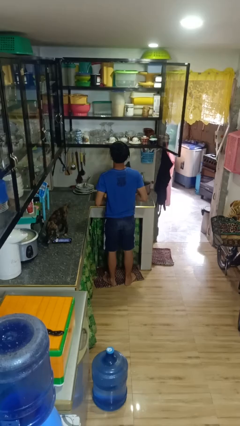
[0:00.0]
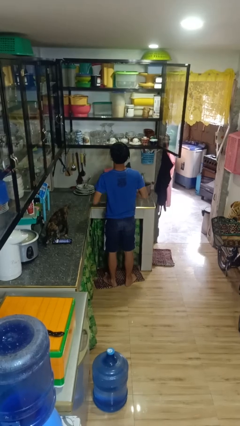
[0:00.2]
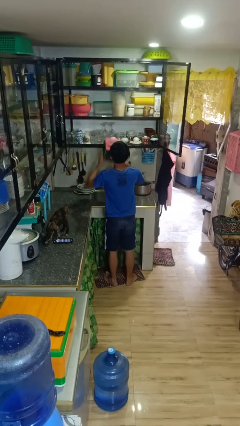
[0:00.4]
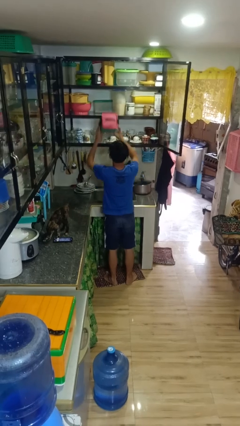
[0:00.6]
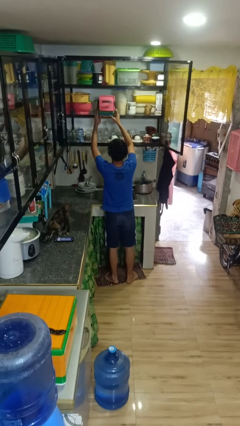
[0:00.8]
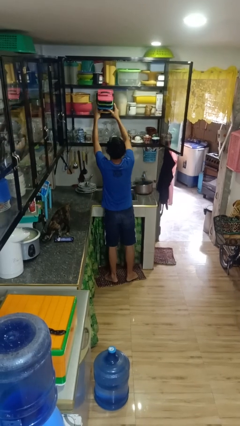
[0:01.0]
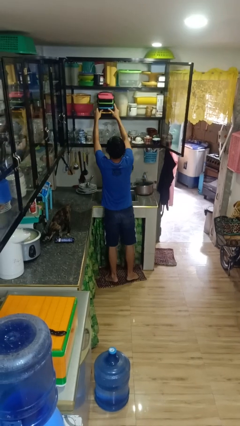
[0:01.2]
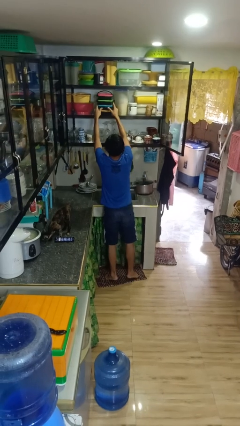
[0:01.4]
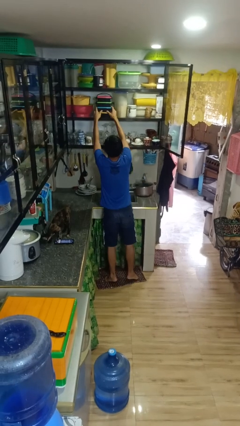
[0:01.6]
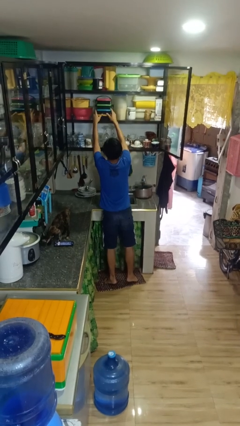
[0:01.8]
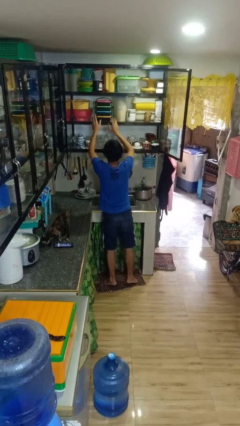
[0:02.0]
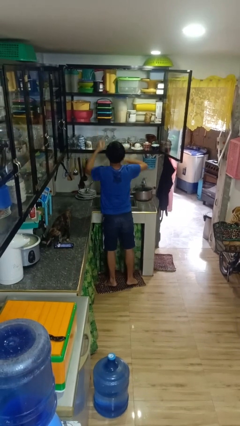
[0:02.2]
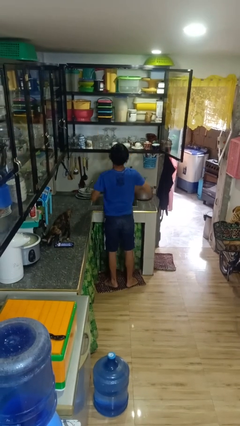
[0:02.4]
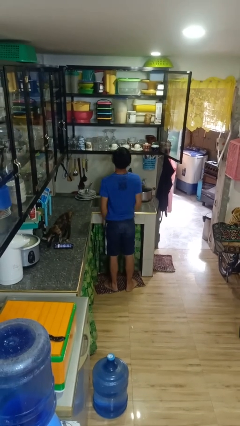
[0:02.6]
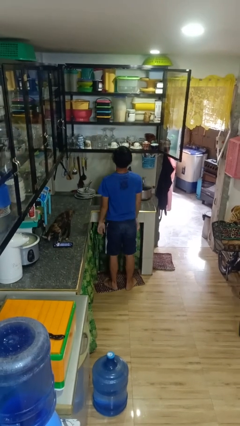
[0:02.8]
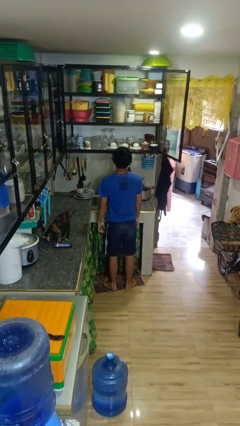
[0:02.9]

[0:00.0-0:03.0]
person puts down object into cabinet

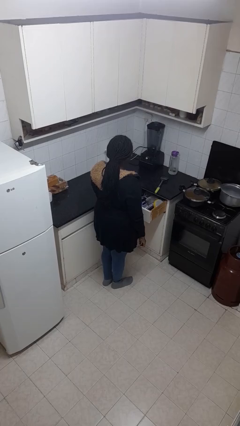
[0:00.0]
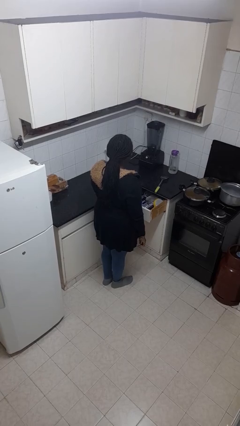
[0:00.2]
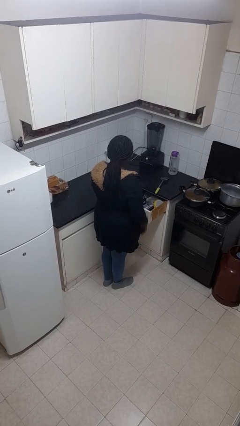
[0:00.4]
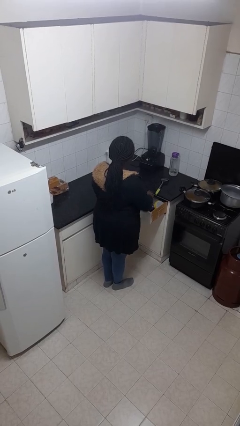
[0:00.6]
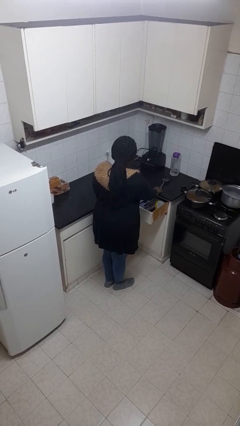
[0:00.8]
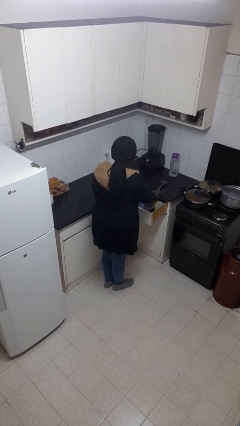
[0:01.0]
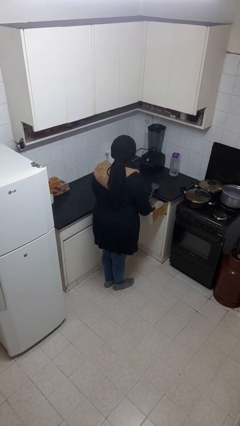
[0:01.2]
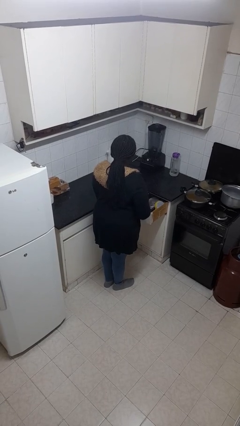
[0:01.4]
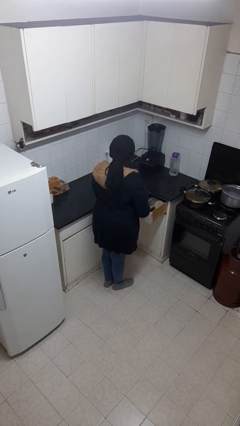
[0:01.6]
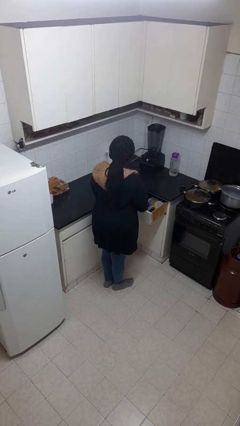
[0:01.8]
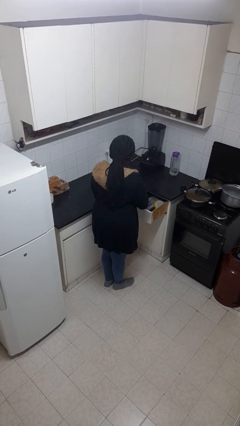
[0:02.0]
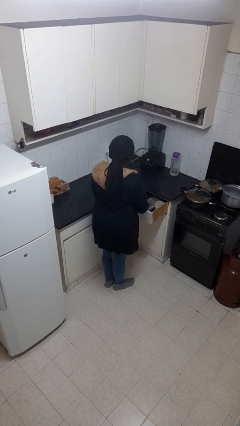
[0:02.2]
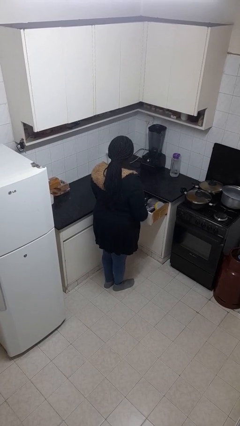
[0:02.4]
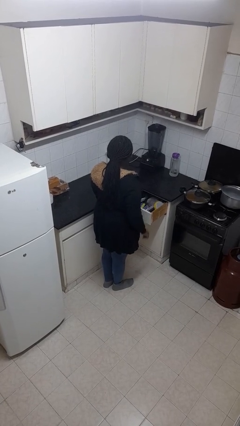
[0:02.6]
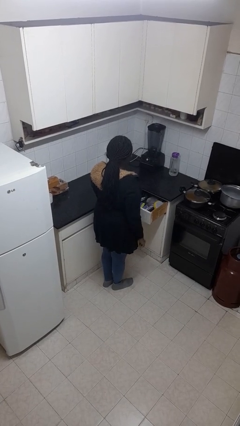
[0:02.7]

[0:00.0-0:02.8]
person puts object into kitchen drawer

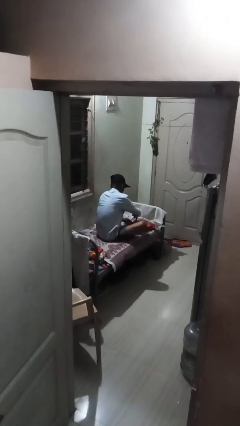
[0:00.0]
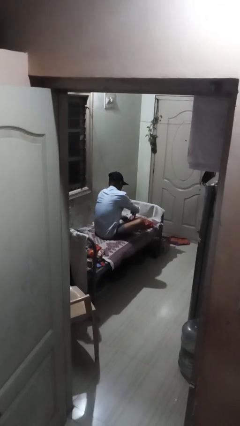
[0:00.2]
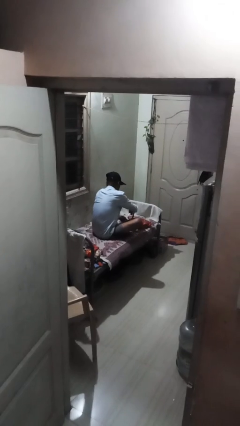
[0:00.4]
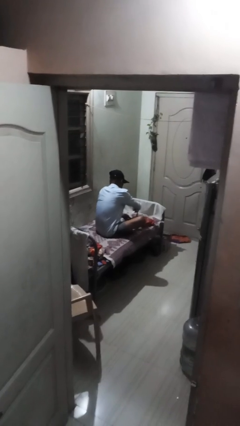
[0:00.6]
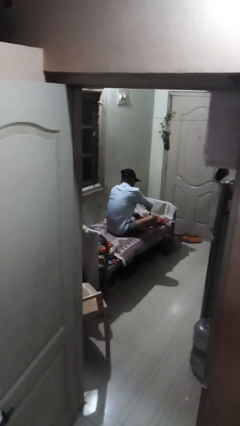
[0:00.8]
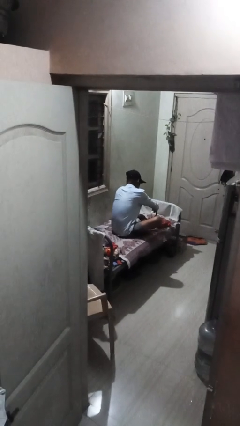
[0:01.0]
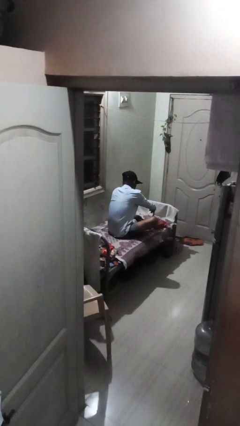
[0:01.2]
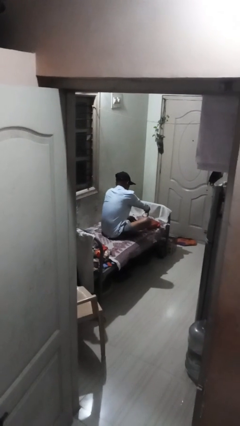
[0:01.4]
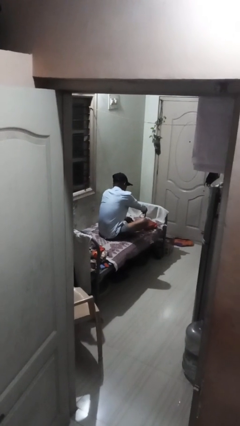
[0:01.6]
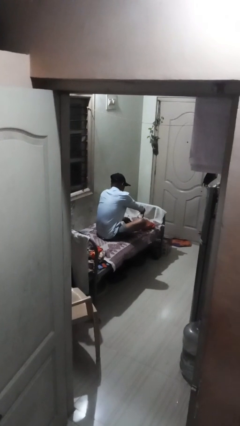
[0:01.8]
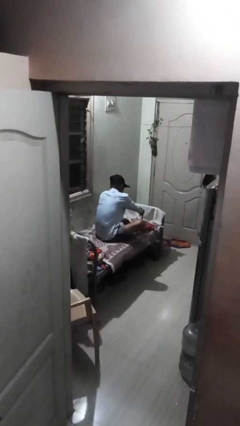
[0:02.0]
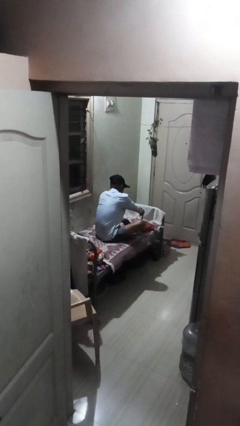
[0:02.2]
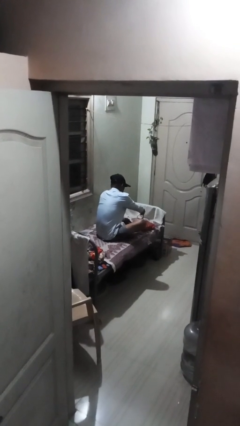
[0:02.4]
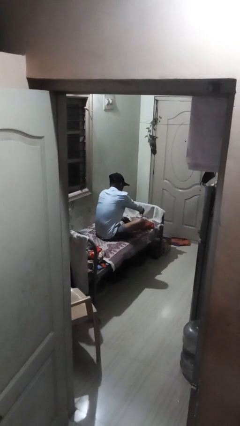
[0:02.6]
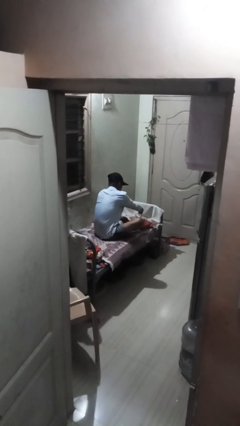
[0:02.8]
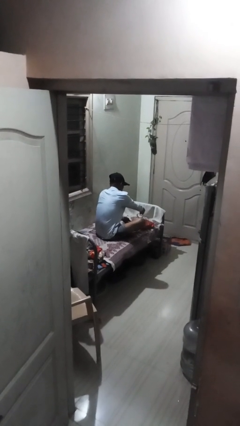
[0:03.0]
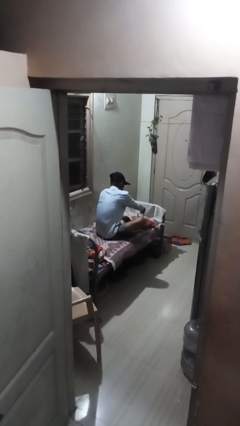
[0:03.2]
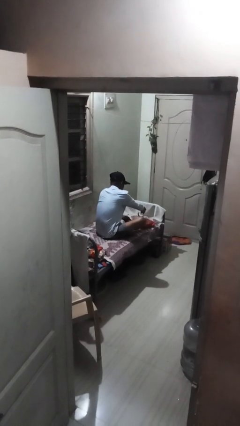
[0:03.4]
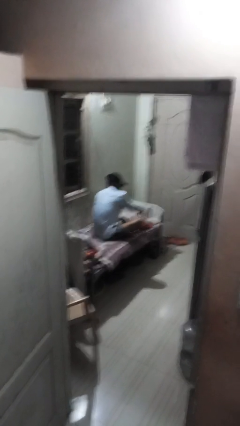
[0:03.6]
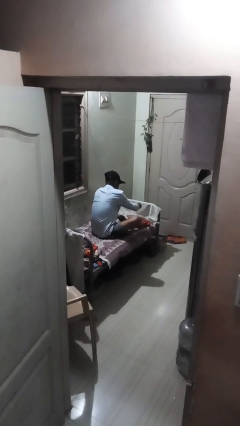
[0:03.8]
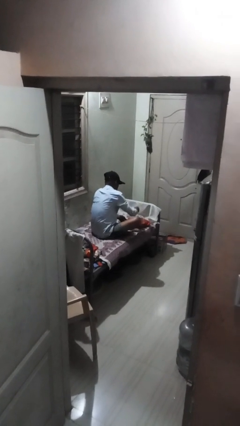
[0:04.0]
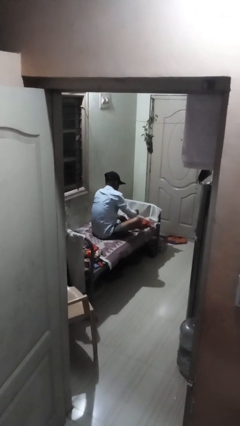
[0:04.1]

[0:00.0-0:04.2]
person wraps box

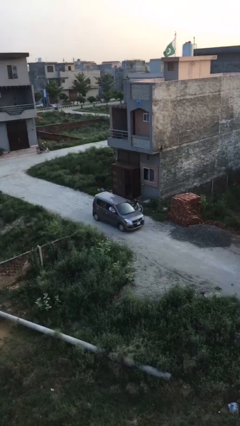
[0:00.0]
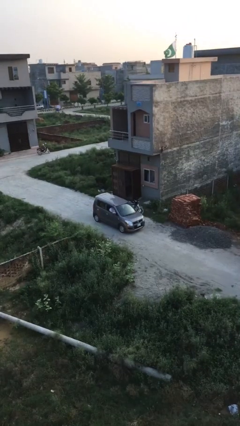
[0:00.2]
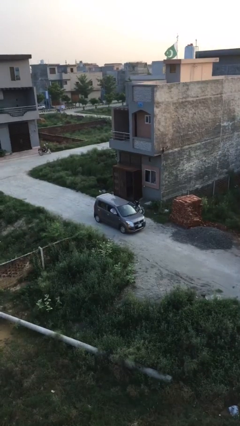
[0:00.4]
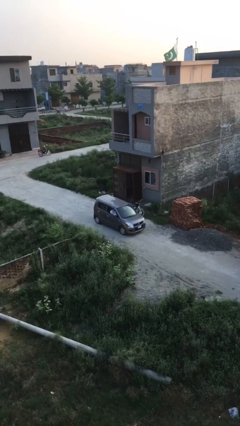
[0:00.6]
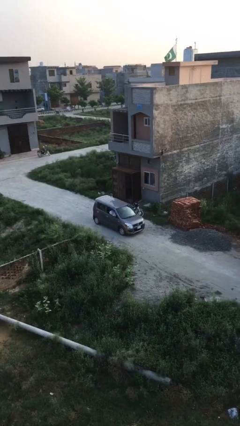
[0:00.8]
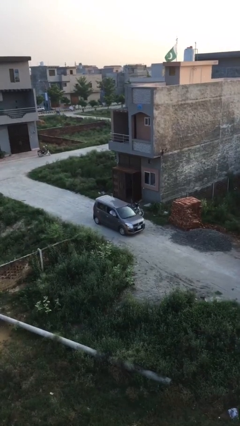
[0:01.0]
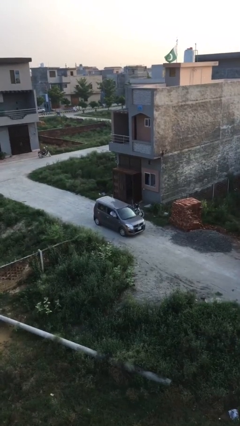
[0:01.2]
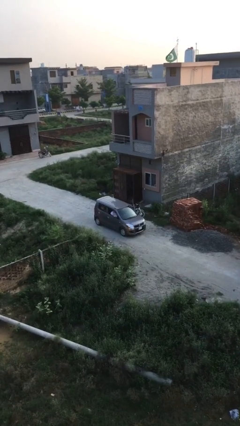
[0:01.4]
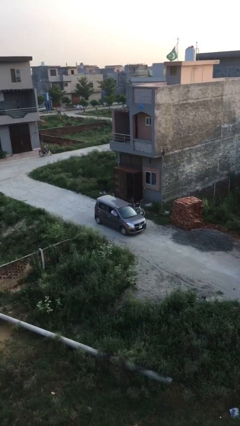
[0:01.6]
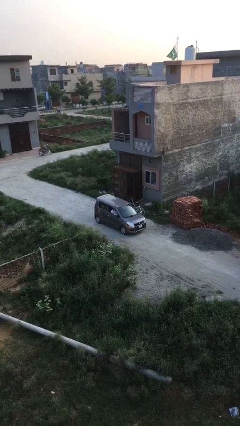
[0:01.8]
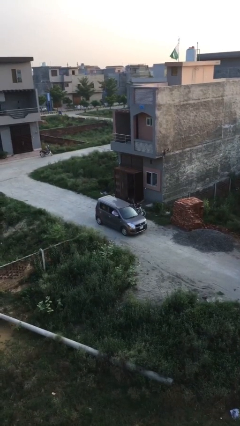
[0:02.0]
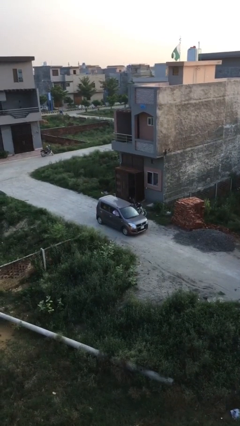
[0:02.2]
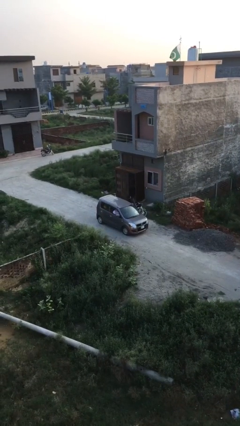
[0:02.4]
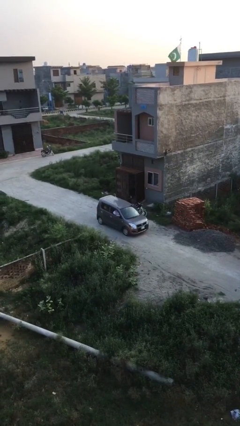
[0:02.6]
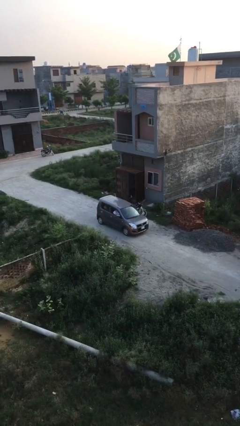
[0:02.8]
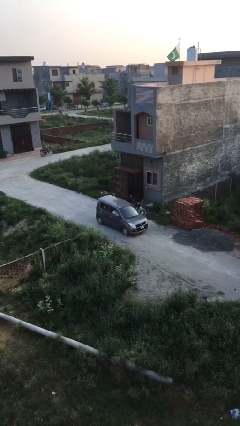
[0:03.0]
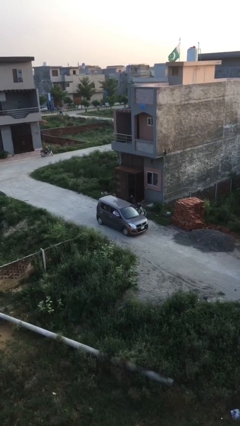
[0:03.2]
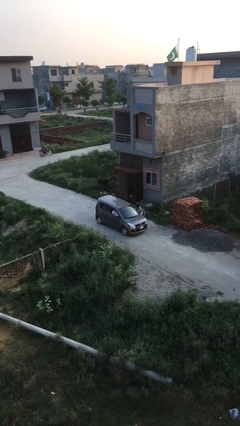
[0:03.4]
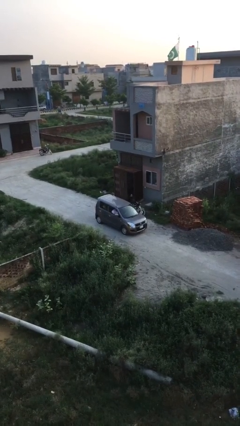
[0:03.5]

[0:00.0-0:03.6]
car drops off person

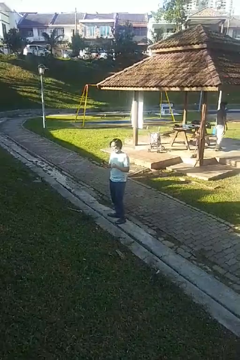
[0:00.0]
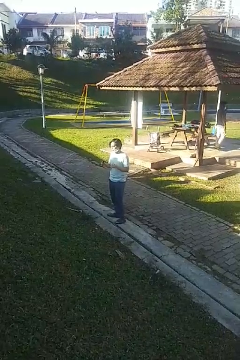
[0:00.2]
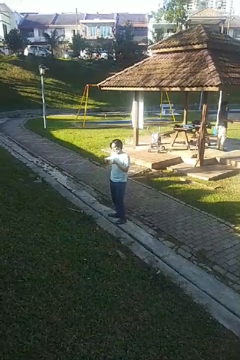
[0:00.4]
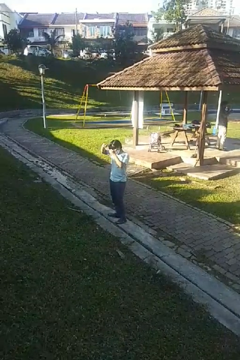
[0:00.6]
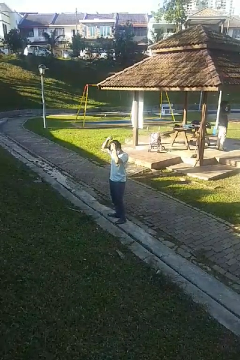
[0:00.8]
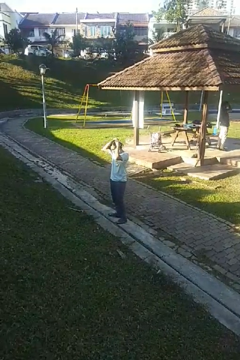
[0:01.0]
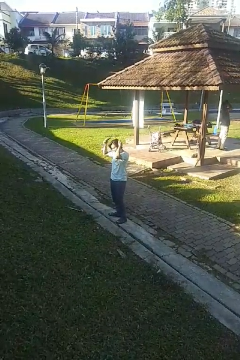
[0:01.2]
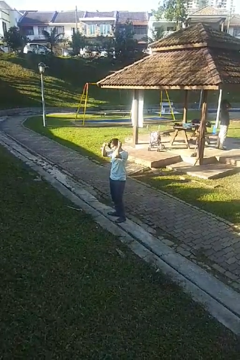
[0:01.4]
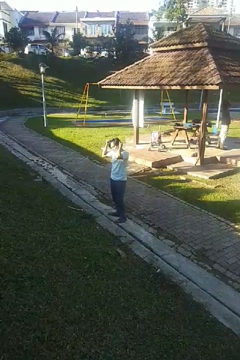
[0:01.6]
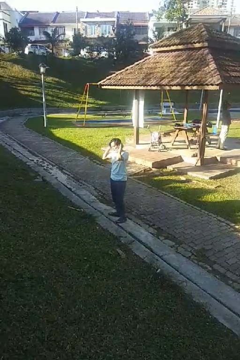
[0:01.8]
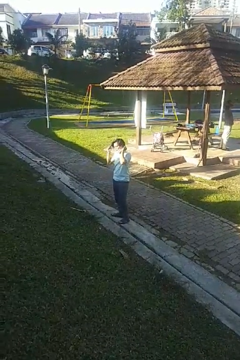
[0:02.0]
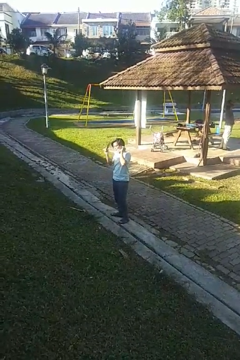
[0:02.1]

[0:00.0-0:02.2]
person brushes hair

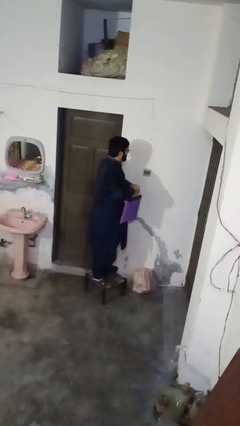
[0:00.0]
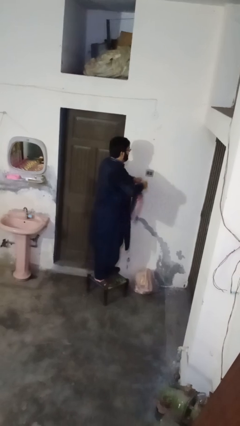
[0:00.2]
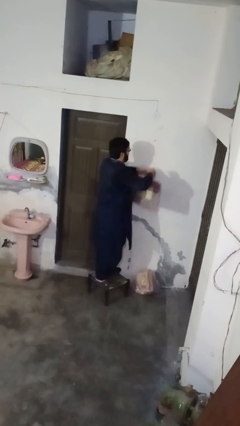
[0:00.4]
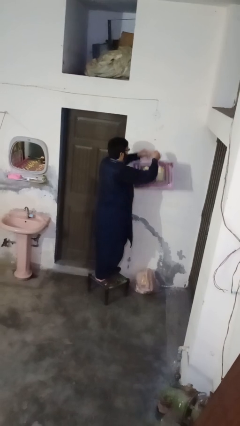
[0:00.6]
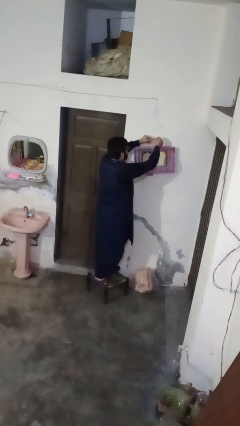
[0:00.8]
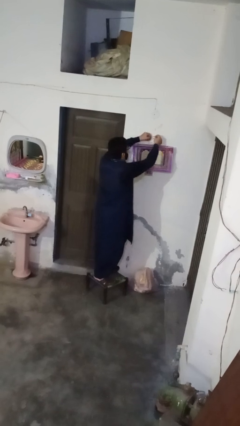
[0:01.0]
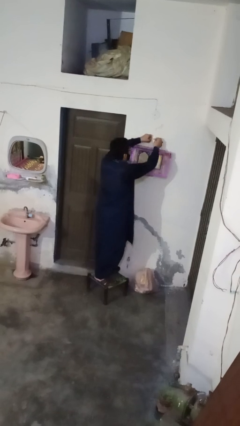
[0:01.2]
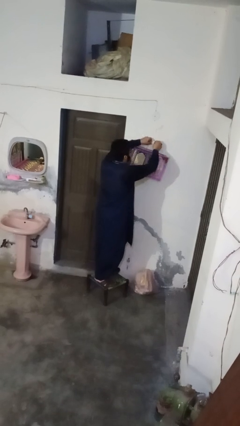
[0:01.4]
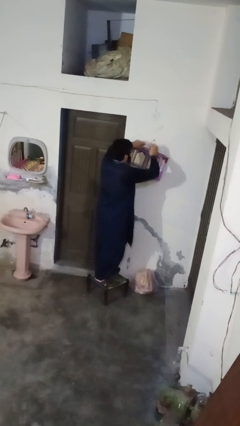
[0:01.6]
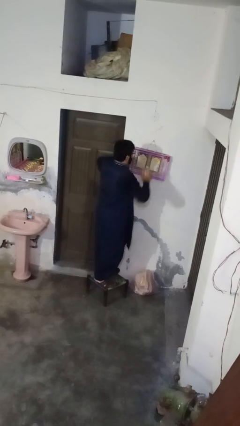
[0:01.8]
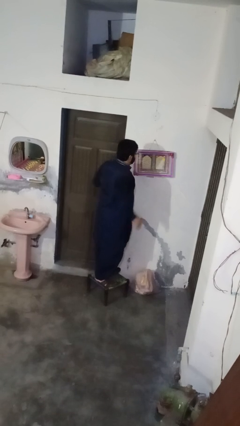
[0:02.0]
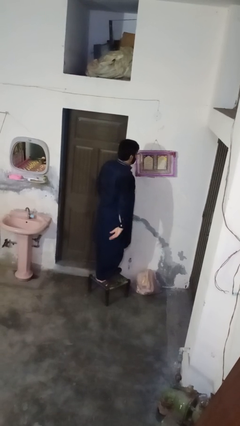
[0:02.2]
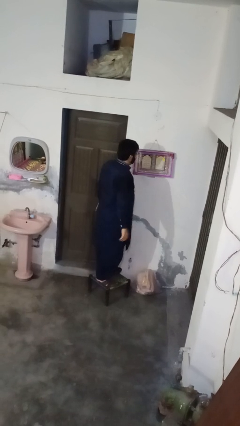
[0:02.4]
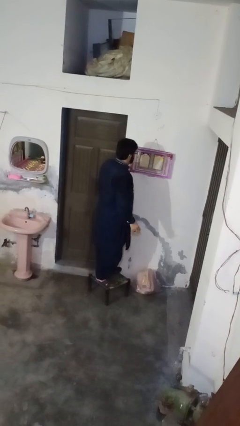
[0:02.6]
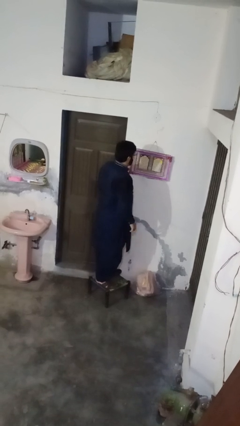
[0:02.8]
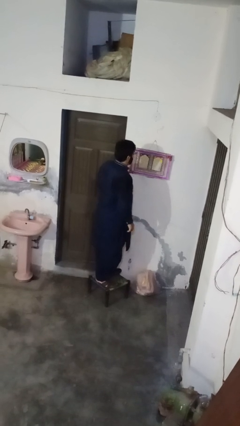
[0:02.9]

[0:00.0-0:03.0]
person puts up picture frame
